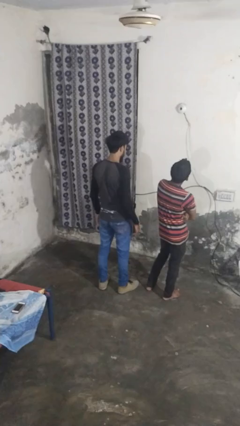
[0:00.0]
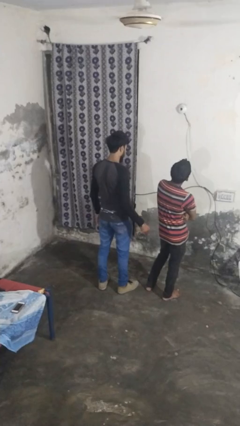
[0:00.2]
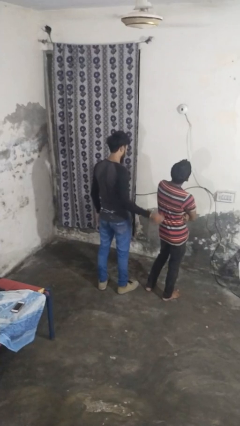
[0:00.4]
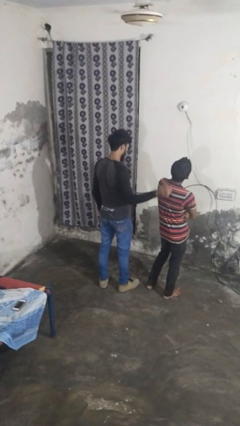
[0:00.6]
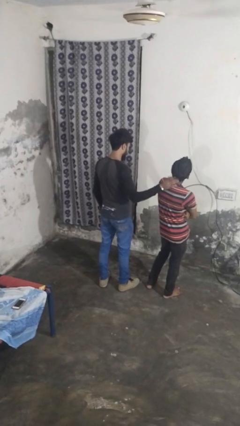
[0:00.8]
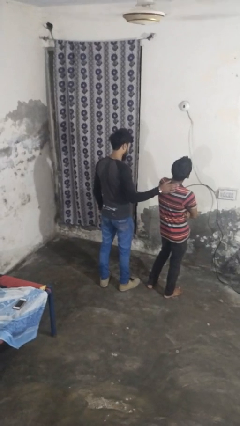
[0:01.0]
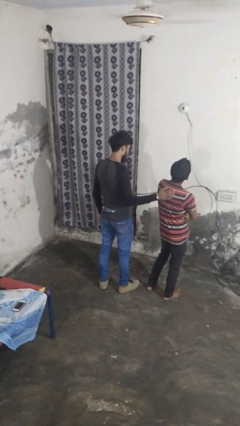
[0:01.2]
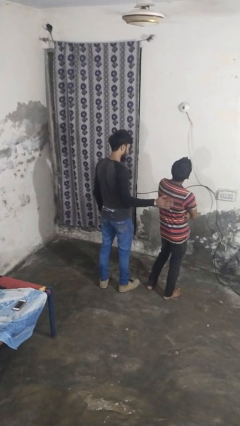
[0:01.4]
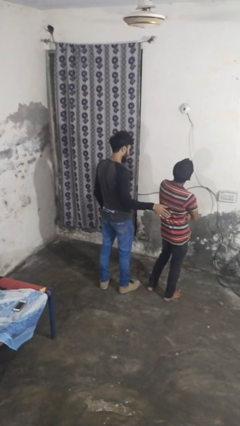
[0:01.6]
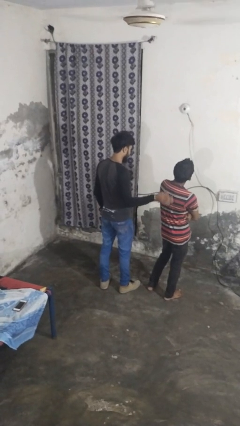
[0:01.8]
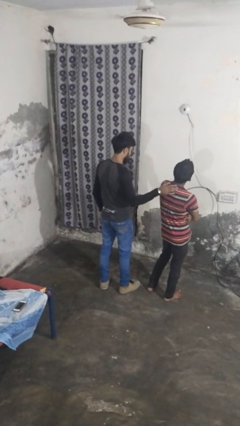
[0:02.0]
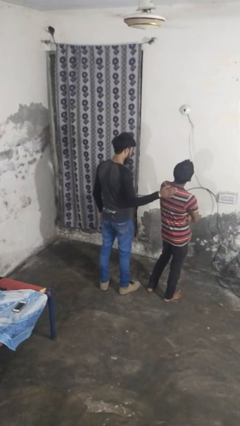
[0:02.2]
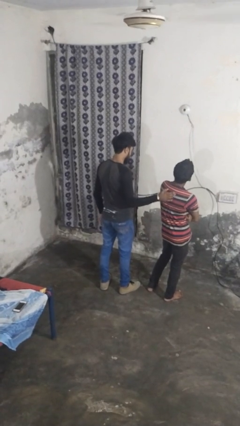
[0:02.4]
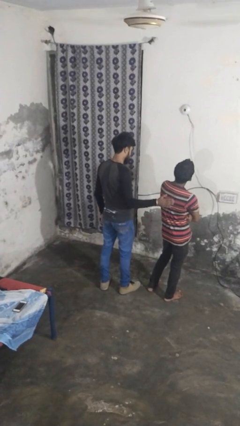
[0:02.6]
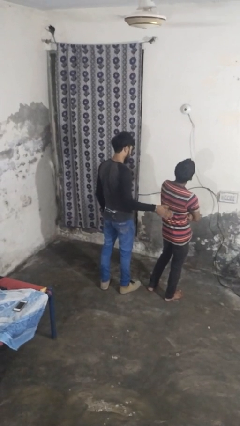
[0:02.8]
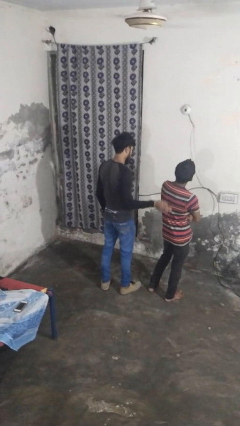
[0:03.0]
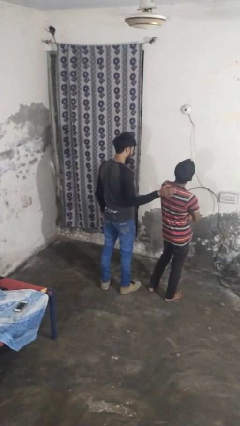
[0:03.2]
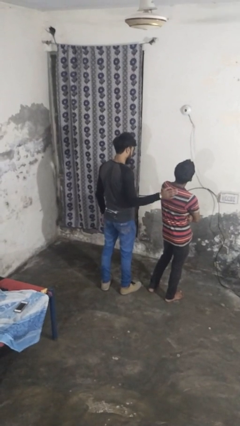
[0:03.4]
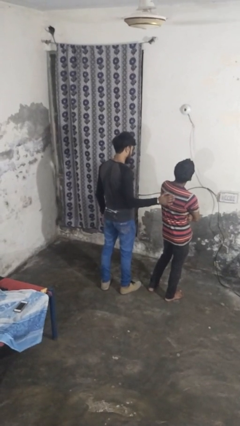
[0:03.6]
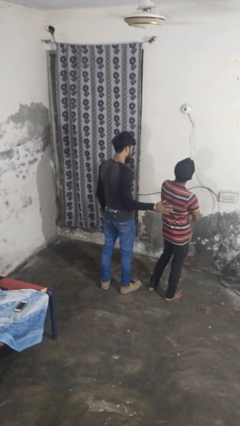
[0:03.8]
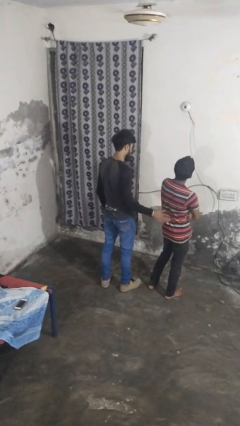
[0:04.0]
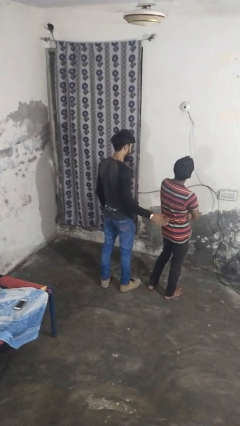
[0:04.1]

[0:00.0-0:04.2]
person touches back of person

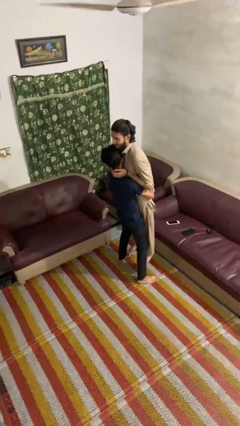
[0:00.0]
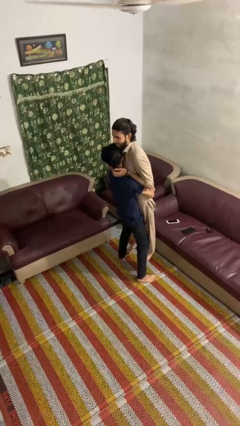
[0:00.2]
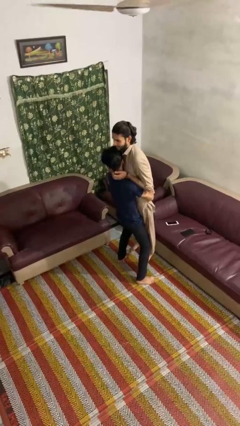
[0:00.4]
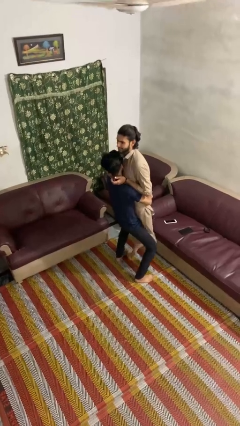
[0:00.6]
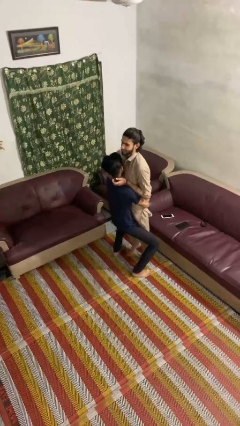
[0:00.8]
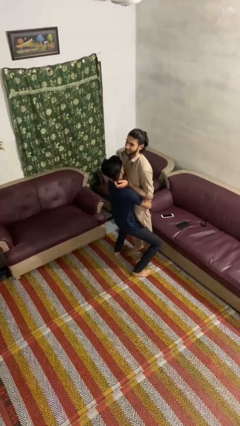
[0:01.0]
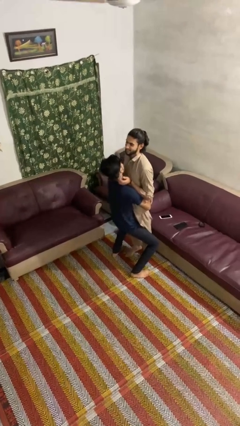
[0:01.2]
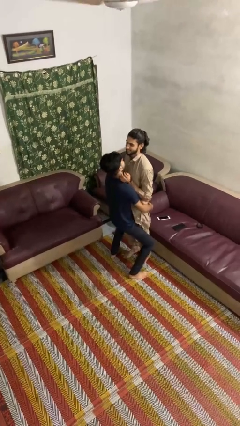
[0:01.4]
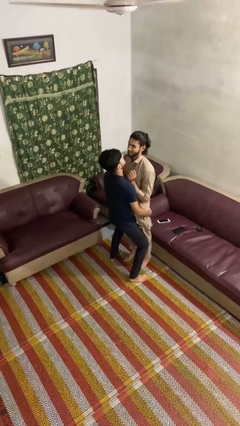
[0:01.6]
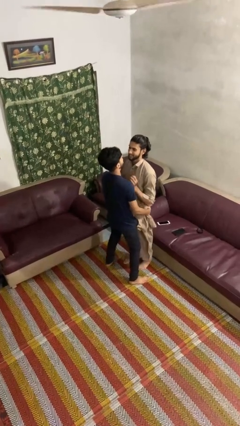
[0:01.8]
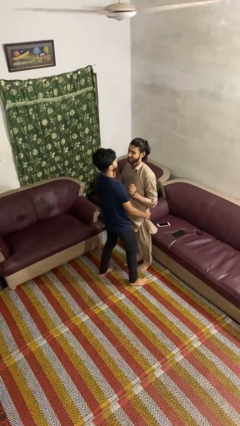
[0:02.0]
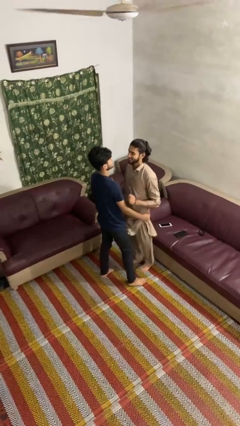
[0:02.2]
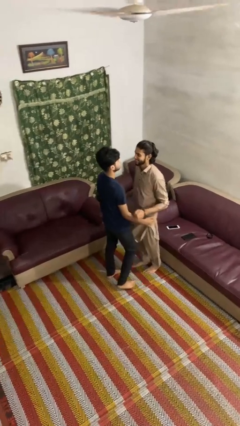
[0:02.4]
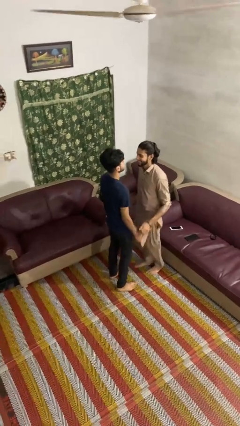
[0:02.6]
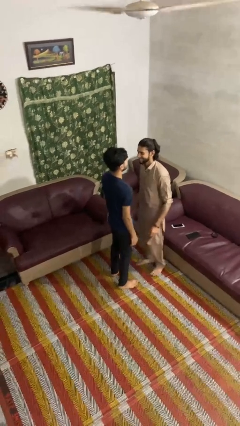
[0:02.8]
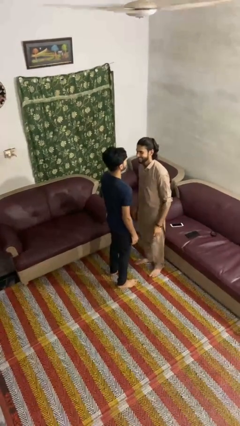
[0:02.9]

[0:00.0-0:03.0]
person puts down person

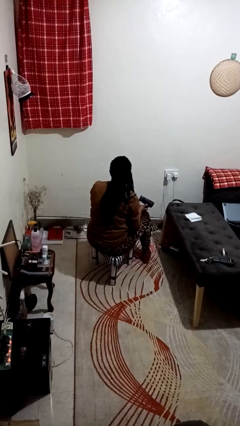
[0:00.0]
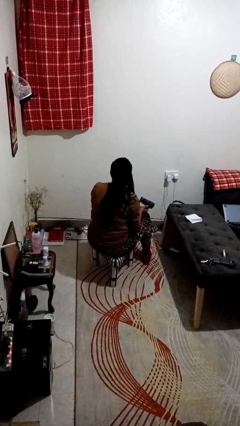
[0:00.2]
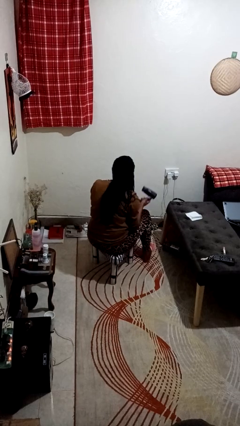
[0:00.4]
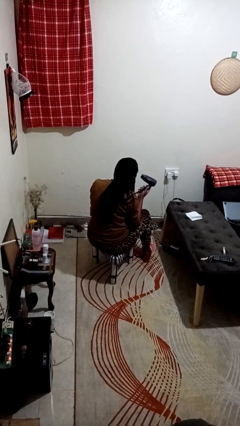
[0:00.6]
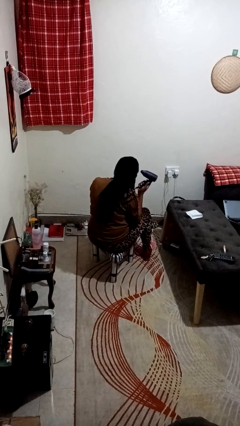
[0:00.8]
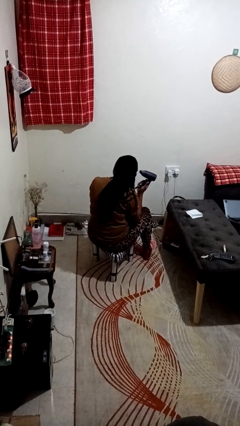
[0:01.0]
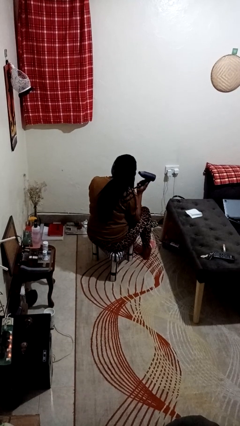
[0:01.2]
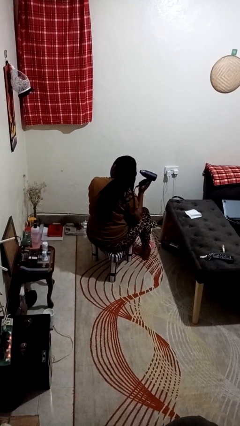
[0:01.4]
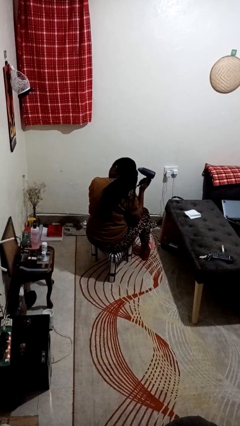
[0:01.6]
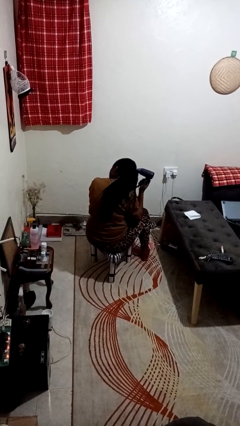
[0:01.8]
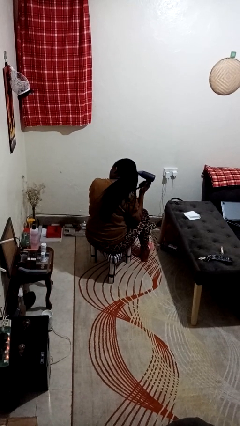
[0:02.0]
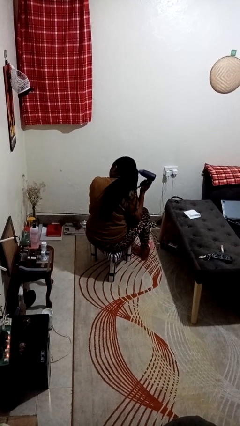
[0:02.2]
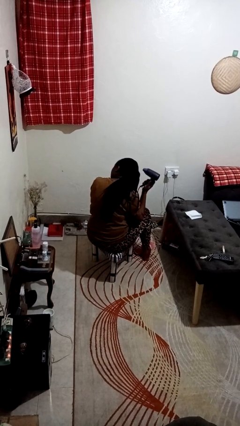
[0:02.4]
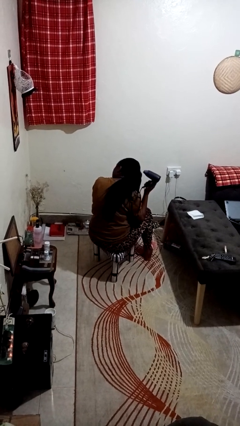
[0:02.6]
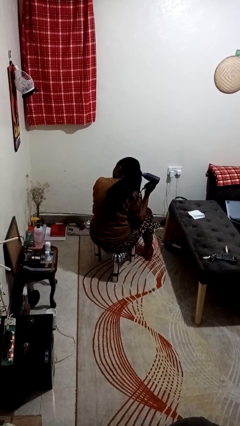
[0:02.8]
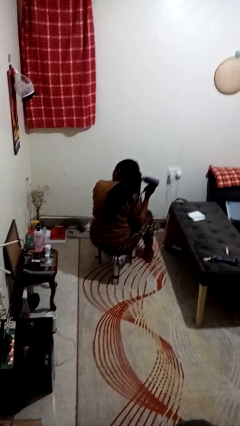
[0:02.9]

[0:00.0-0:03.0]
person dries hair with hairdryer

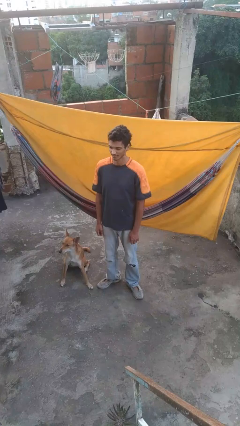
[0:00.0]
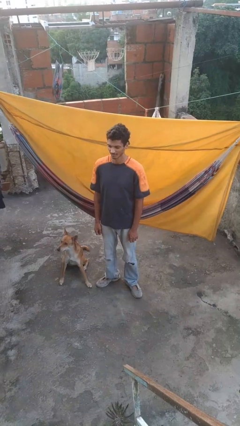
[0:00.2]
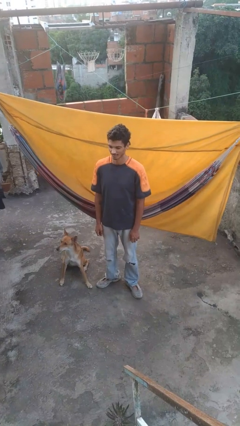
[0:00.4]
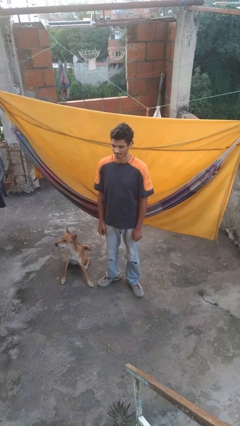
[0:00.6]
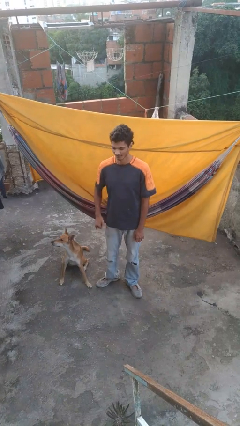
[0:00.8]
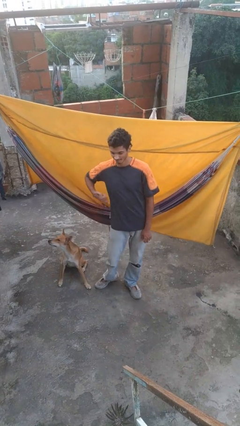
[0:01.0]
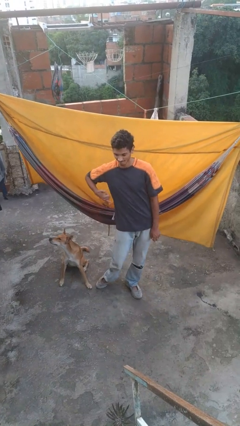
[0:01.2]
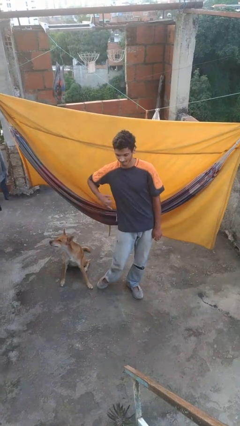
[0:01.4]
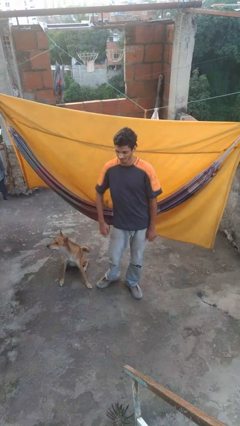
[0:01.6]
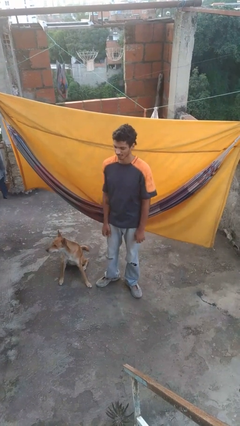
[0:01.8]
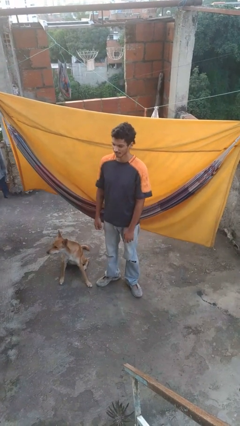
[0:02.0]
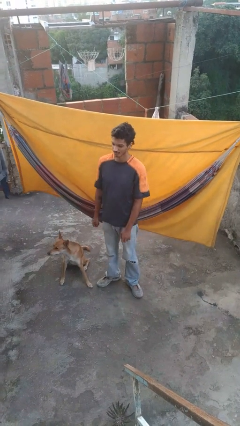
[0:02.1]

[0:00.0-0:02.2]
person gestures hang loose

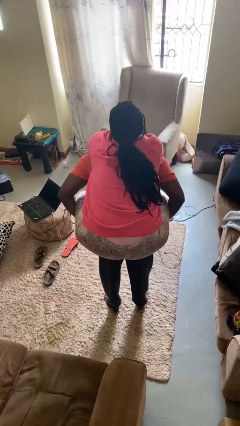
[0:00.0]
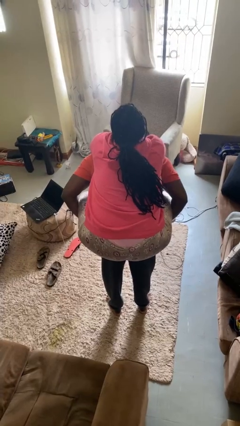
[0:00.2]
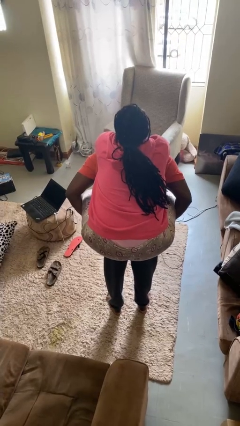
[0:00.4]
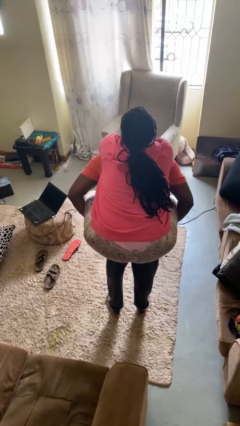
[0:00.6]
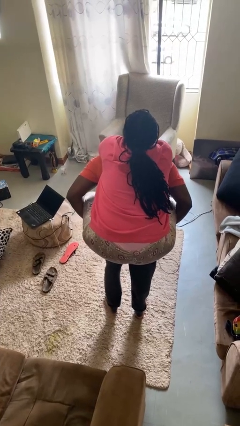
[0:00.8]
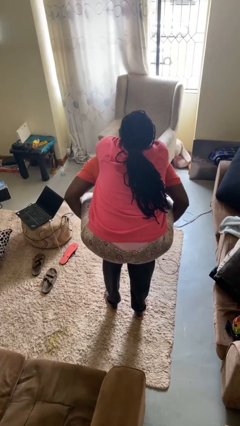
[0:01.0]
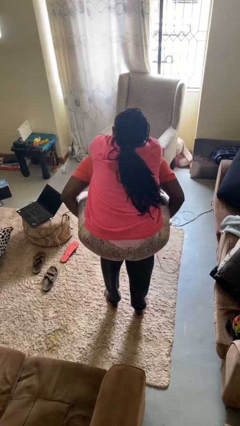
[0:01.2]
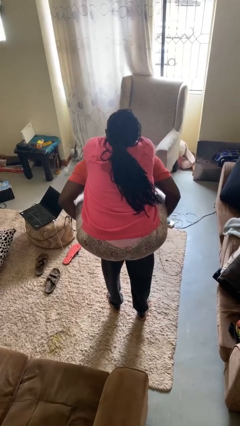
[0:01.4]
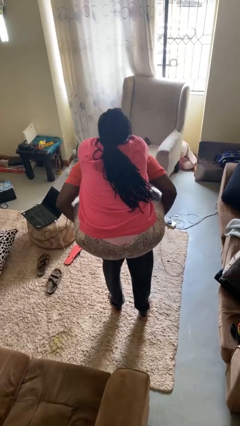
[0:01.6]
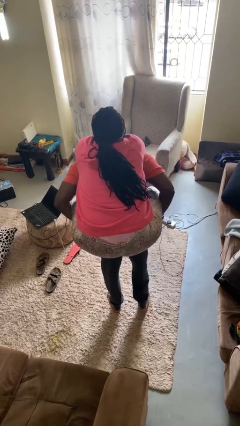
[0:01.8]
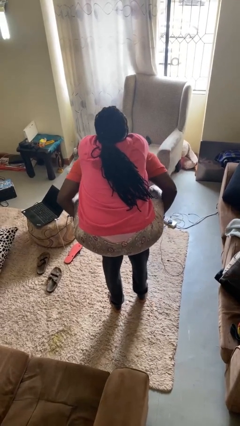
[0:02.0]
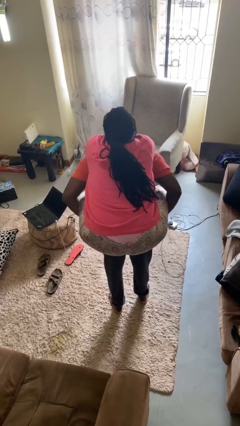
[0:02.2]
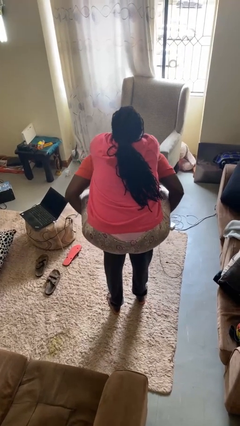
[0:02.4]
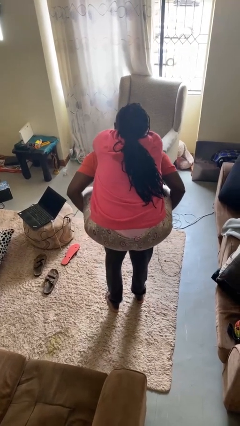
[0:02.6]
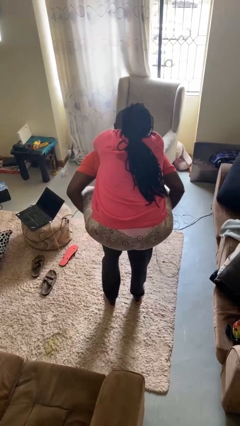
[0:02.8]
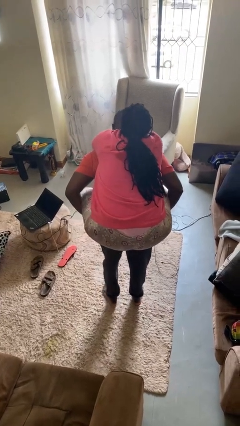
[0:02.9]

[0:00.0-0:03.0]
person carries person on back

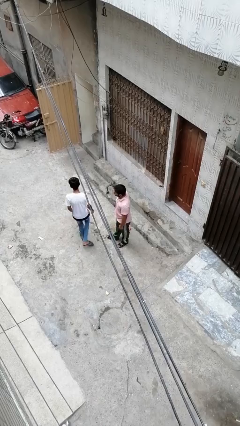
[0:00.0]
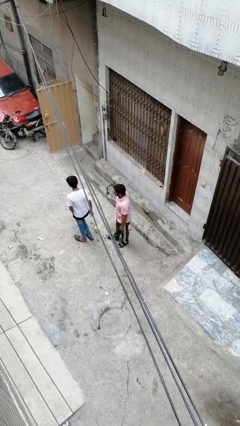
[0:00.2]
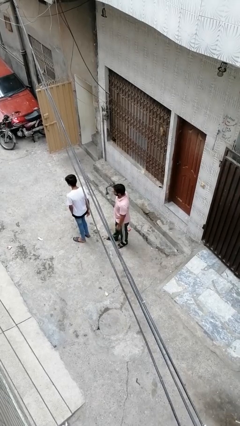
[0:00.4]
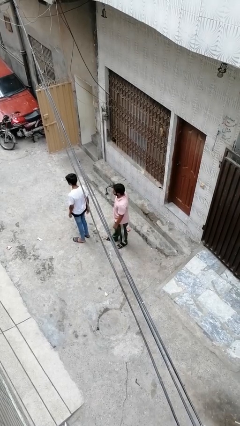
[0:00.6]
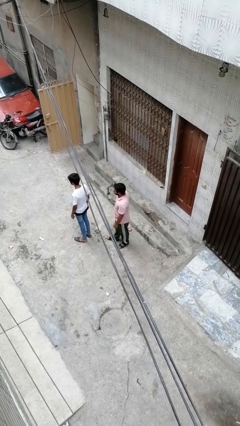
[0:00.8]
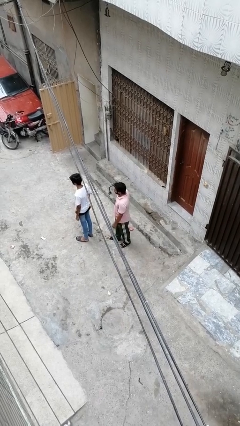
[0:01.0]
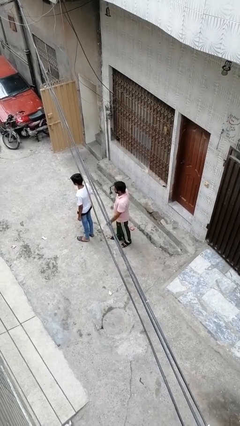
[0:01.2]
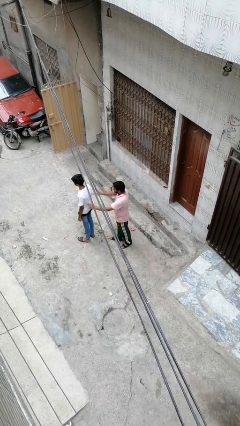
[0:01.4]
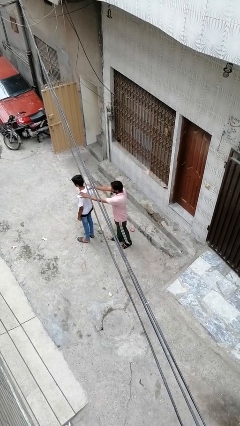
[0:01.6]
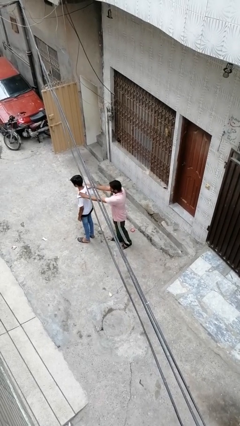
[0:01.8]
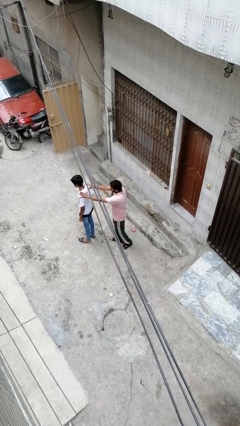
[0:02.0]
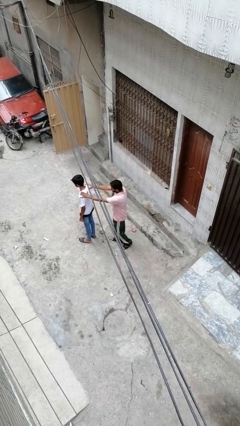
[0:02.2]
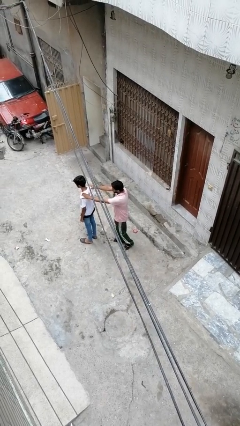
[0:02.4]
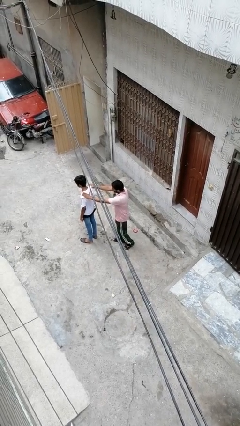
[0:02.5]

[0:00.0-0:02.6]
person grabs person by shoulder
